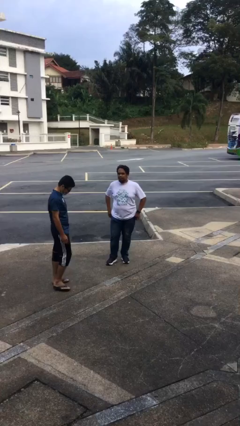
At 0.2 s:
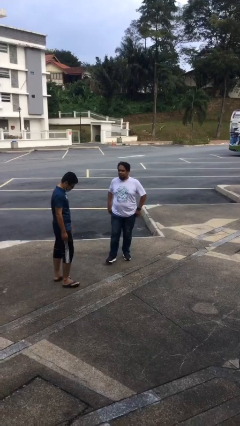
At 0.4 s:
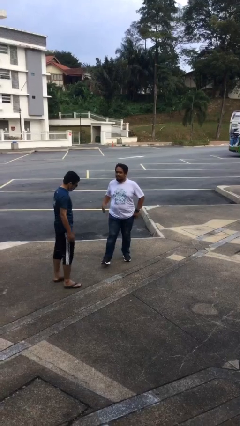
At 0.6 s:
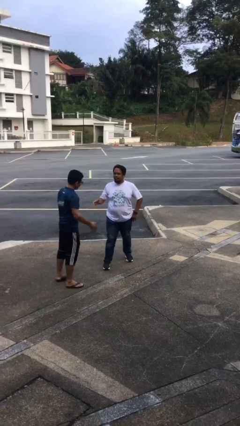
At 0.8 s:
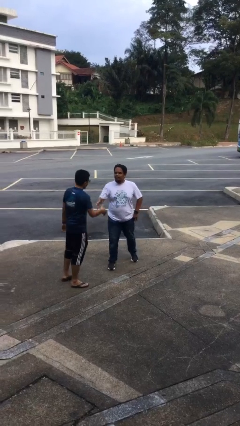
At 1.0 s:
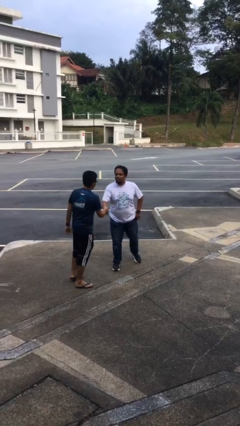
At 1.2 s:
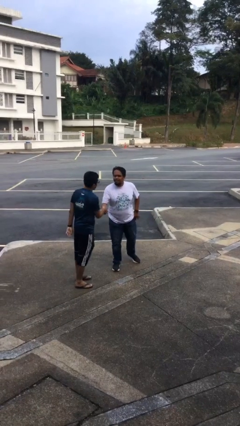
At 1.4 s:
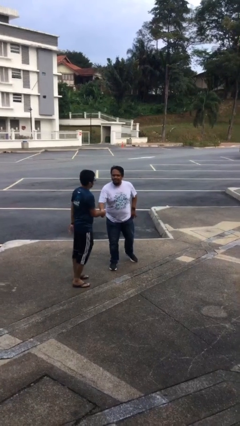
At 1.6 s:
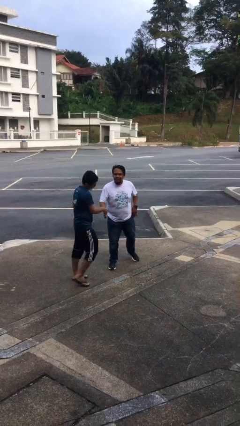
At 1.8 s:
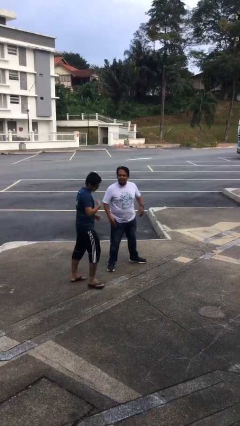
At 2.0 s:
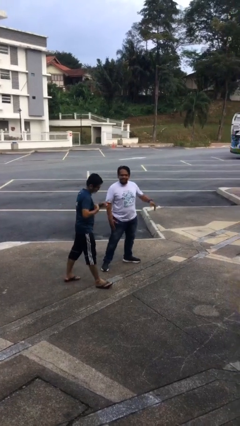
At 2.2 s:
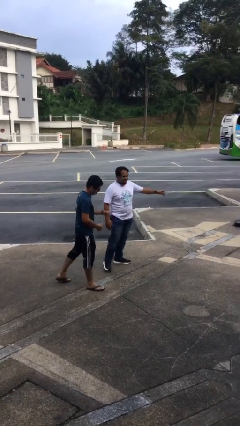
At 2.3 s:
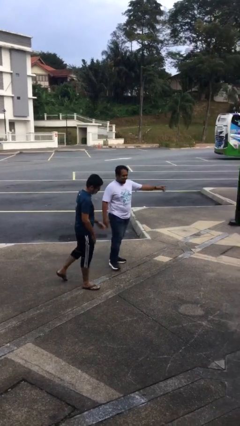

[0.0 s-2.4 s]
person shakes hand

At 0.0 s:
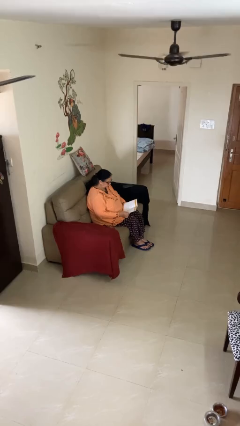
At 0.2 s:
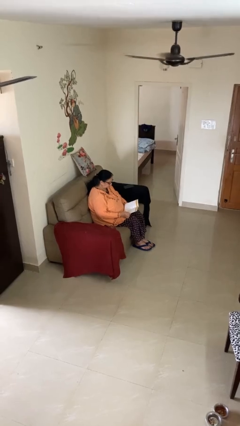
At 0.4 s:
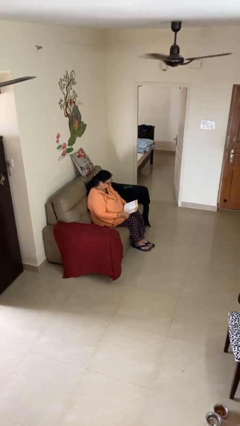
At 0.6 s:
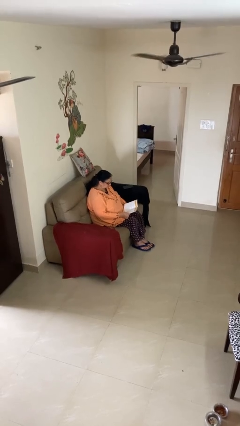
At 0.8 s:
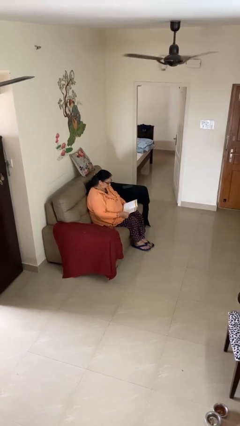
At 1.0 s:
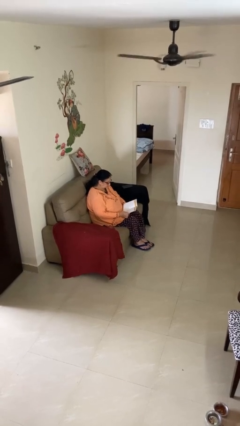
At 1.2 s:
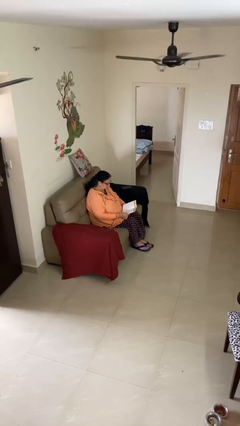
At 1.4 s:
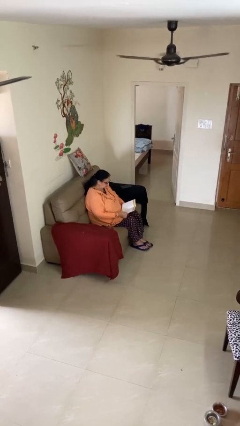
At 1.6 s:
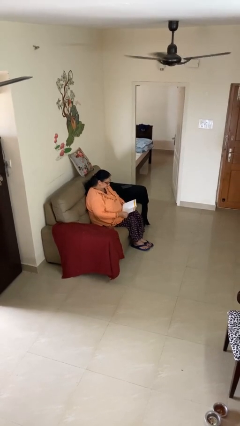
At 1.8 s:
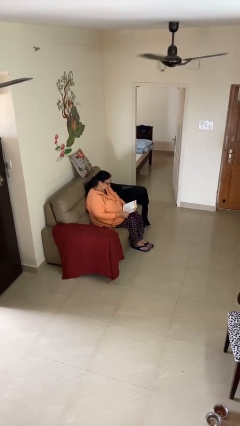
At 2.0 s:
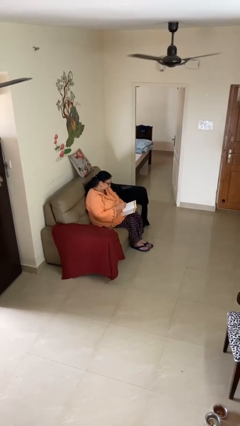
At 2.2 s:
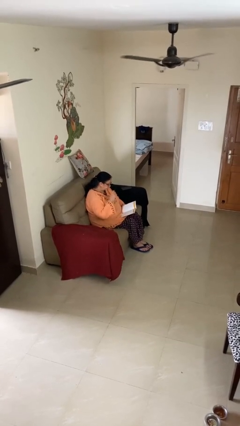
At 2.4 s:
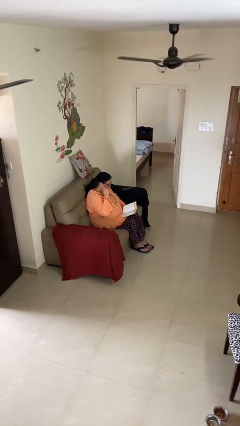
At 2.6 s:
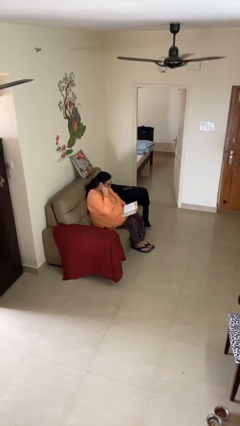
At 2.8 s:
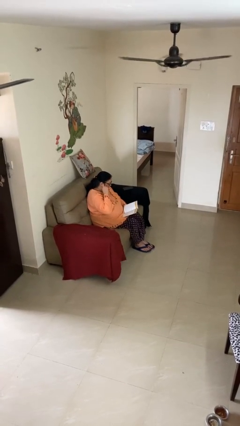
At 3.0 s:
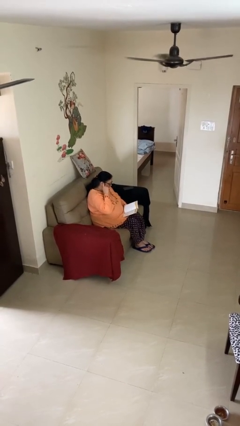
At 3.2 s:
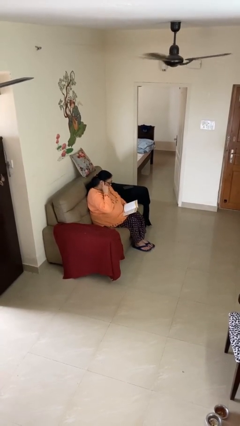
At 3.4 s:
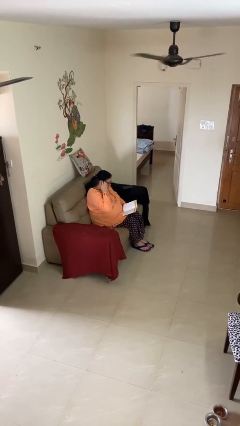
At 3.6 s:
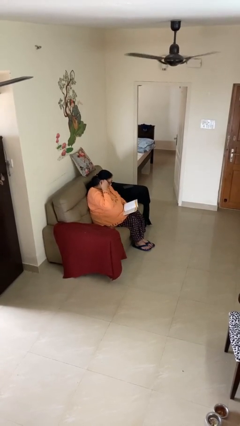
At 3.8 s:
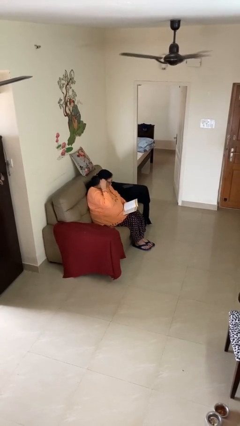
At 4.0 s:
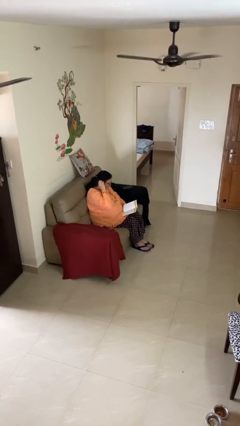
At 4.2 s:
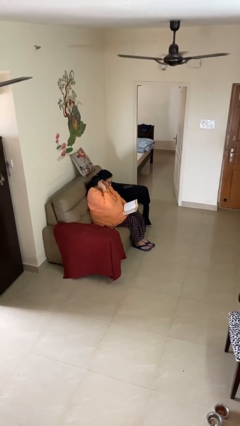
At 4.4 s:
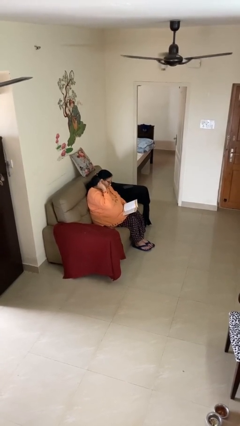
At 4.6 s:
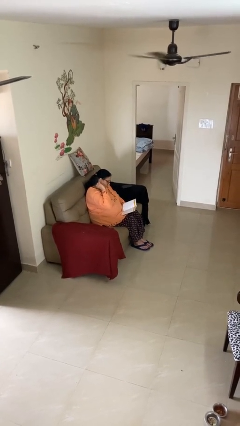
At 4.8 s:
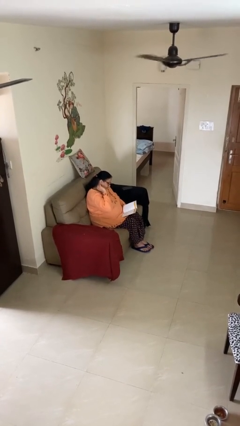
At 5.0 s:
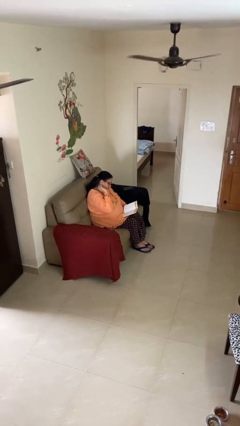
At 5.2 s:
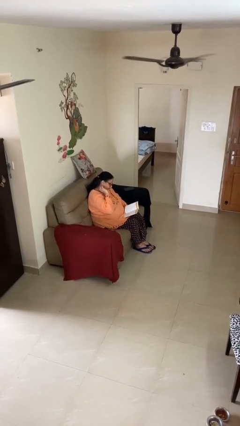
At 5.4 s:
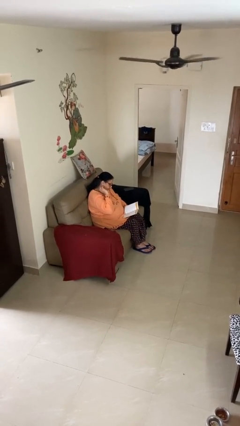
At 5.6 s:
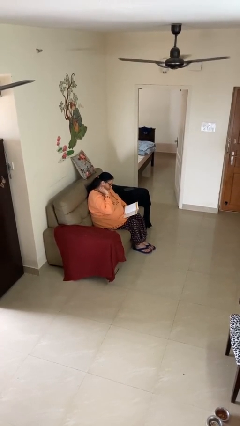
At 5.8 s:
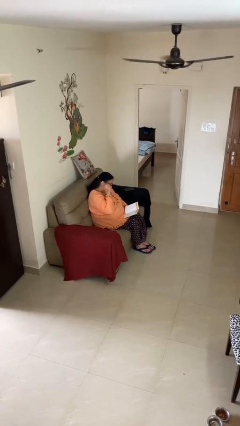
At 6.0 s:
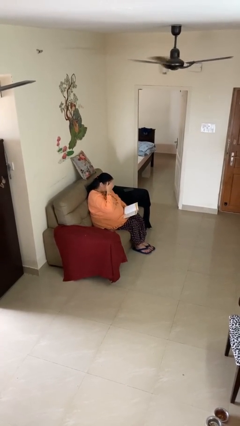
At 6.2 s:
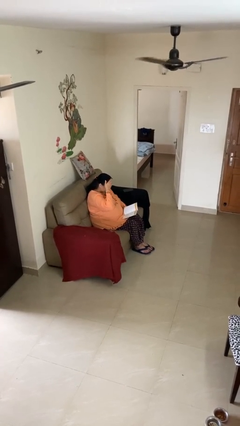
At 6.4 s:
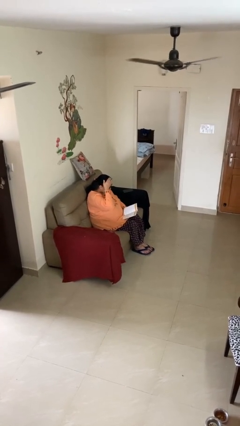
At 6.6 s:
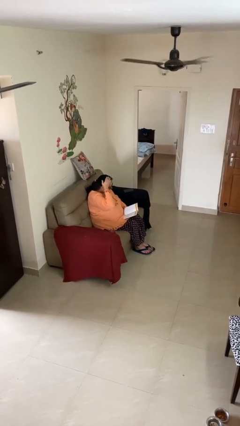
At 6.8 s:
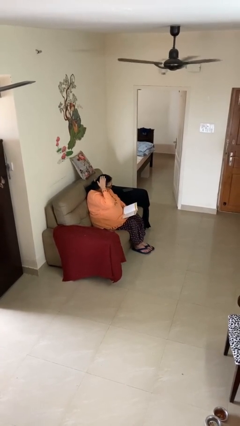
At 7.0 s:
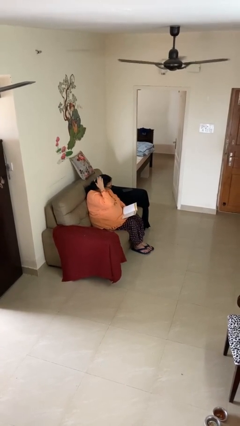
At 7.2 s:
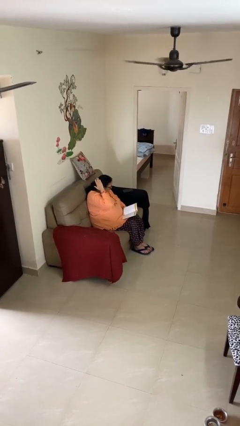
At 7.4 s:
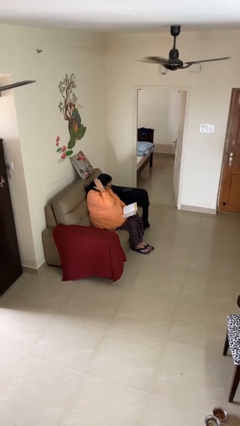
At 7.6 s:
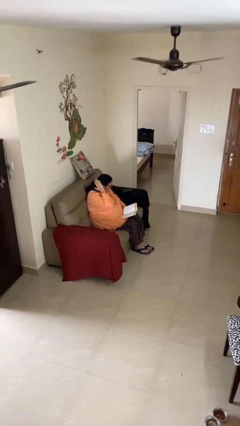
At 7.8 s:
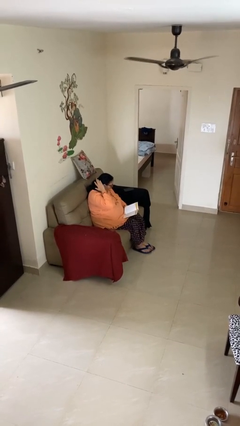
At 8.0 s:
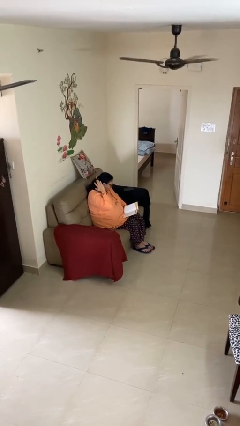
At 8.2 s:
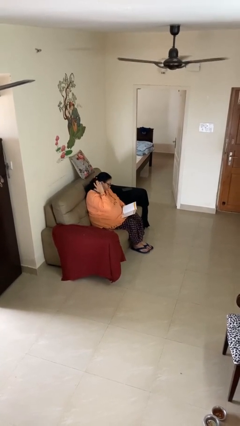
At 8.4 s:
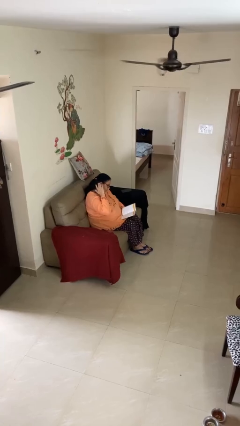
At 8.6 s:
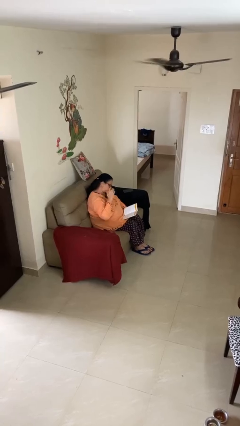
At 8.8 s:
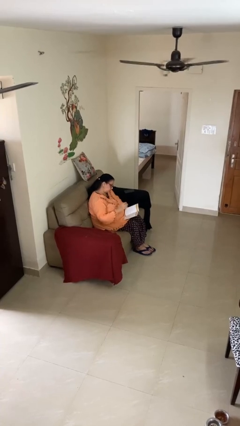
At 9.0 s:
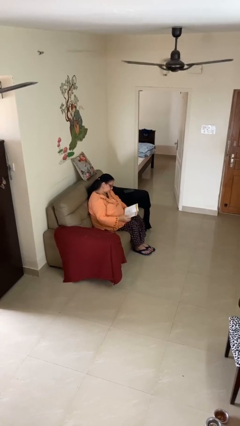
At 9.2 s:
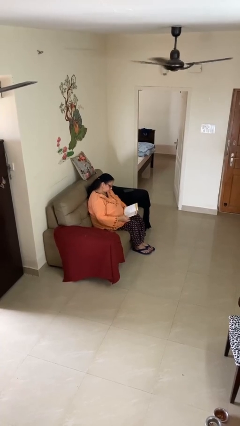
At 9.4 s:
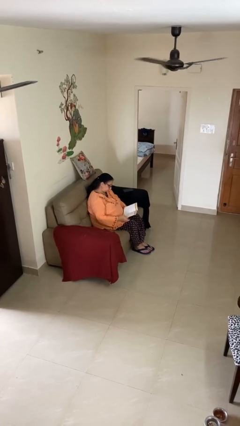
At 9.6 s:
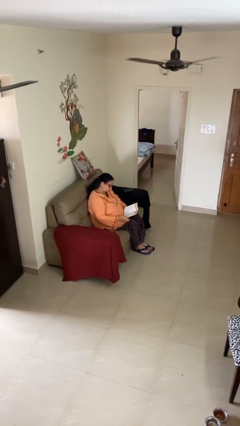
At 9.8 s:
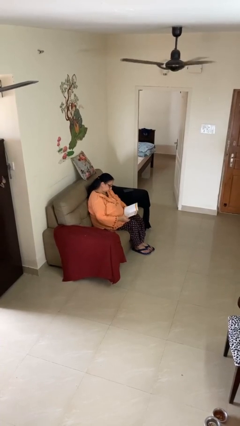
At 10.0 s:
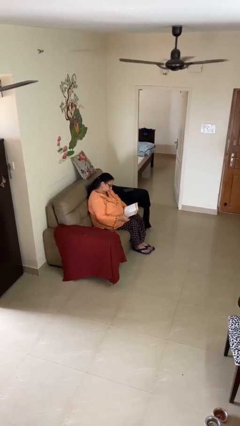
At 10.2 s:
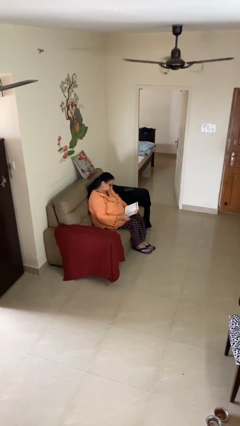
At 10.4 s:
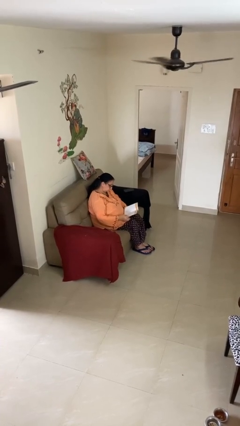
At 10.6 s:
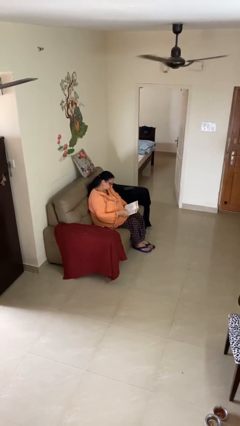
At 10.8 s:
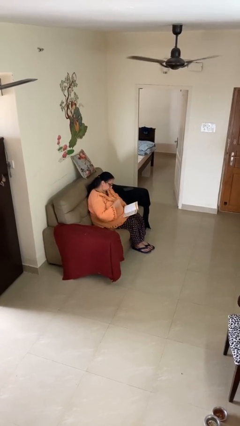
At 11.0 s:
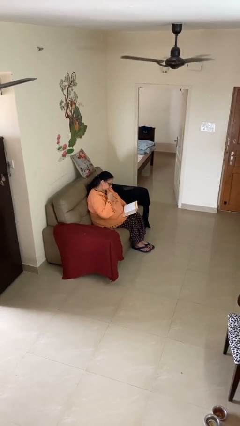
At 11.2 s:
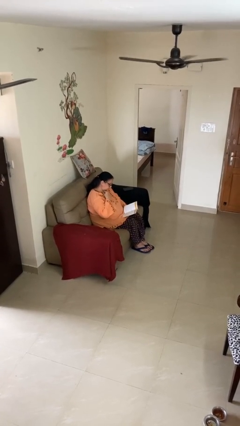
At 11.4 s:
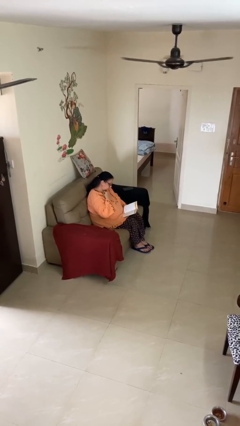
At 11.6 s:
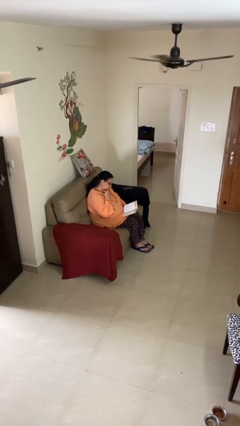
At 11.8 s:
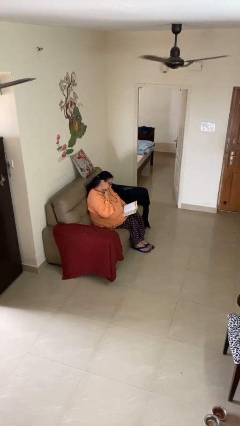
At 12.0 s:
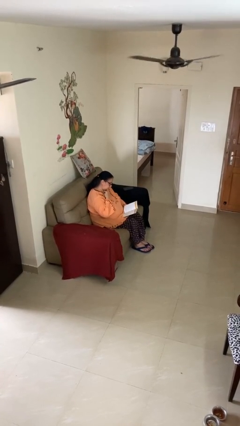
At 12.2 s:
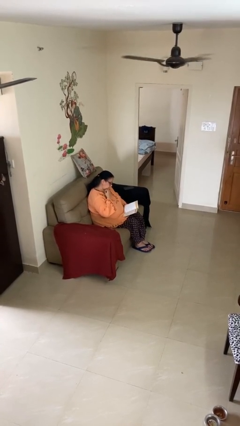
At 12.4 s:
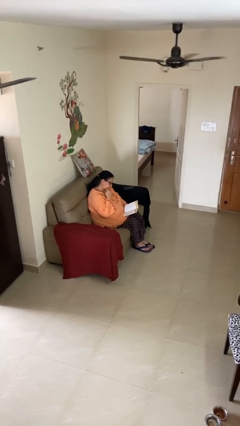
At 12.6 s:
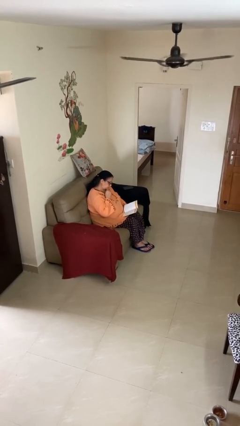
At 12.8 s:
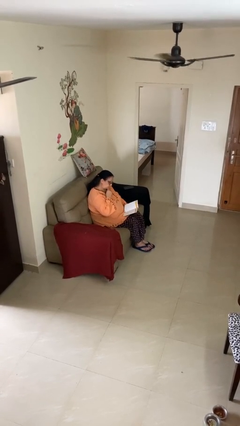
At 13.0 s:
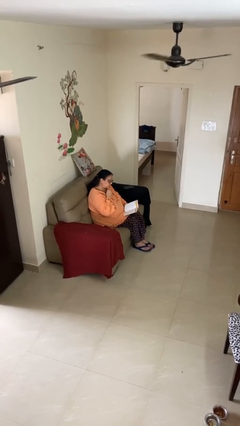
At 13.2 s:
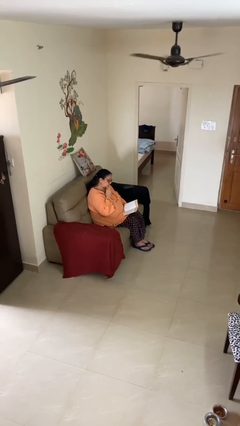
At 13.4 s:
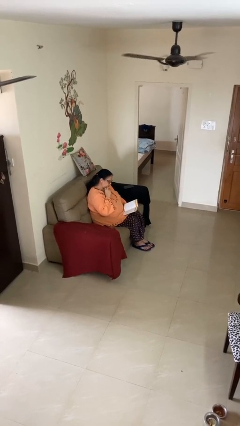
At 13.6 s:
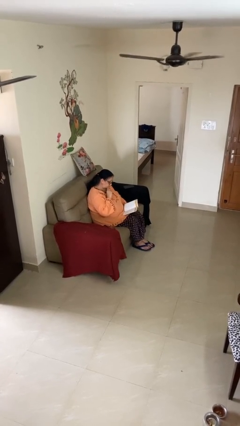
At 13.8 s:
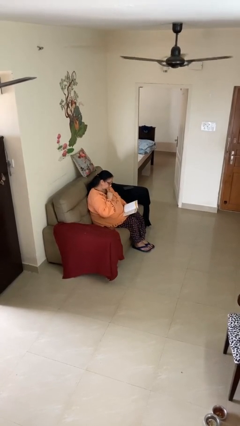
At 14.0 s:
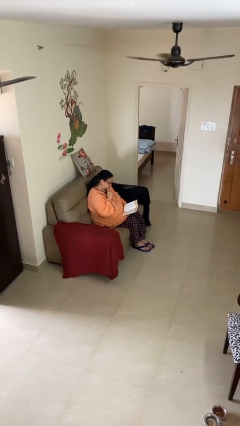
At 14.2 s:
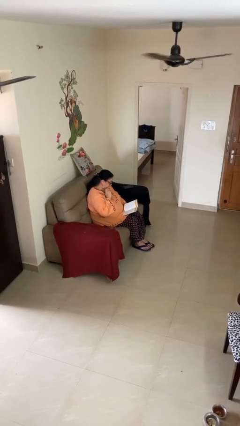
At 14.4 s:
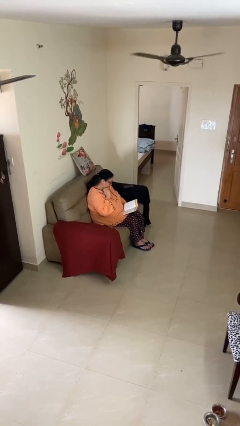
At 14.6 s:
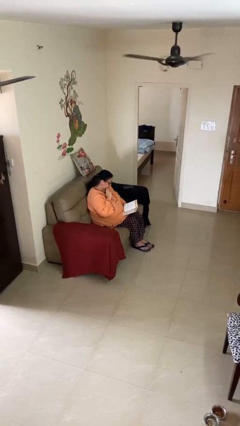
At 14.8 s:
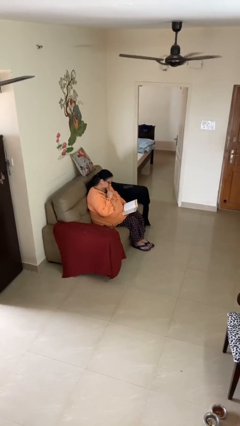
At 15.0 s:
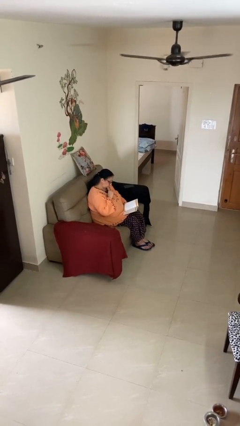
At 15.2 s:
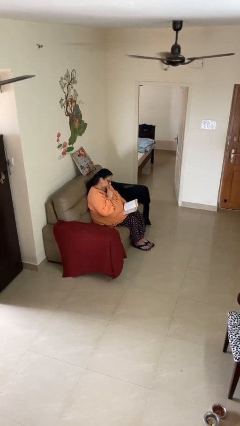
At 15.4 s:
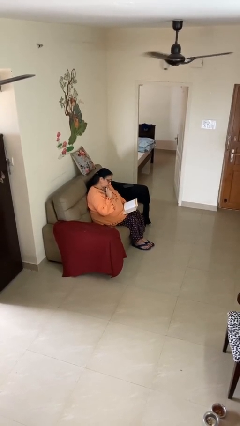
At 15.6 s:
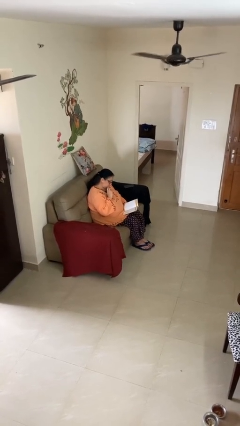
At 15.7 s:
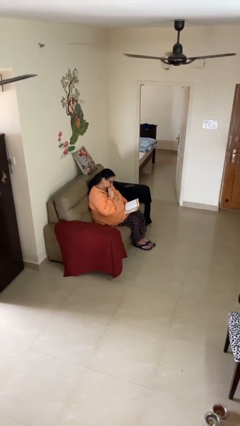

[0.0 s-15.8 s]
person reads document
